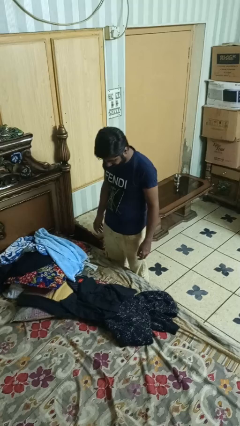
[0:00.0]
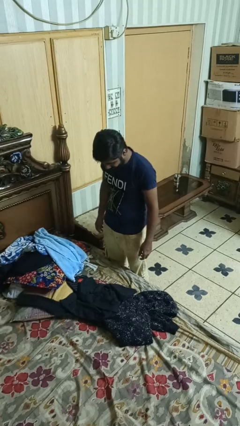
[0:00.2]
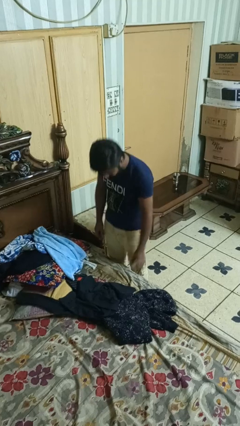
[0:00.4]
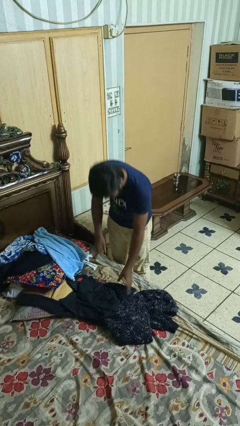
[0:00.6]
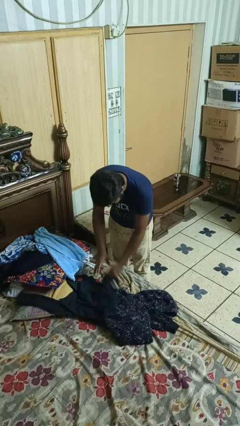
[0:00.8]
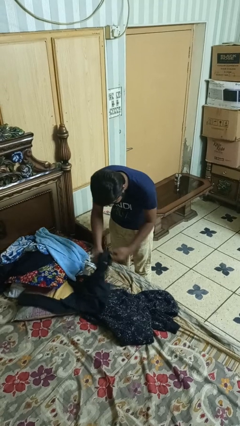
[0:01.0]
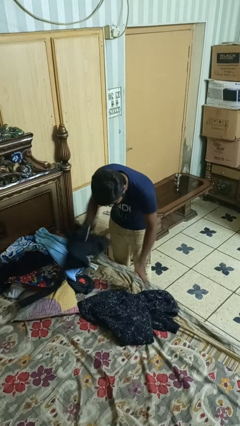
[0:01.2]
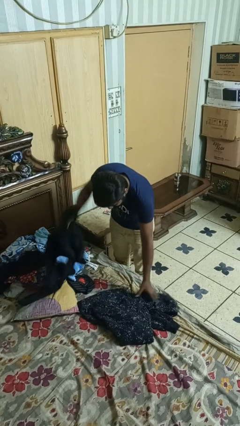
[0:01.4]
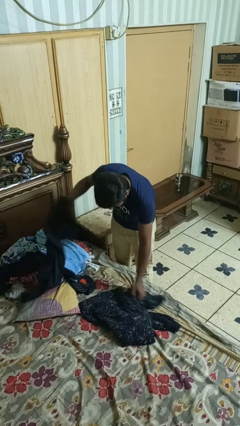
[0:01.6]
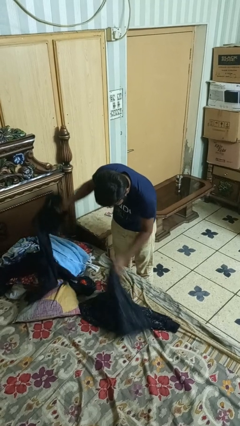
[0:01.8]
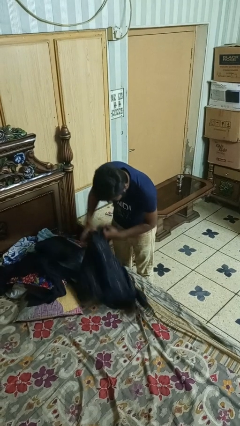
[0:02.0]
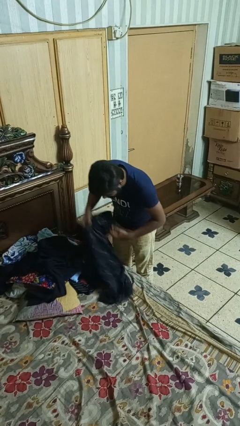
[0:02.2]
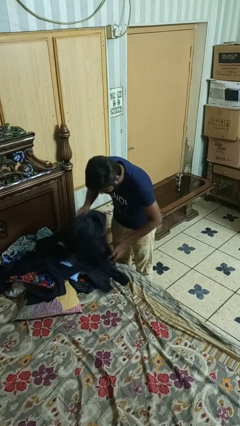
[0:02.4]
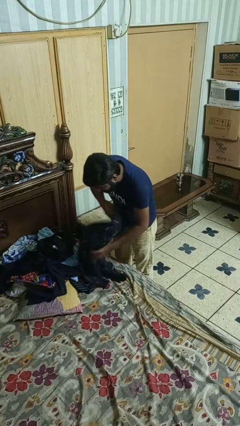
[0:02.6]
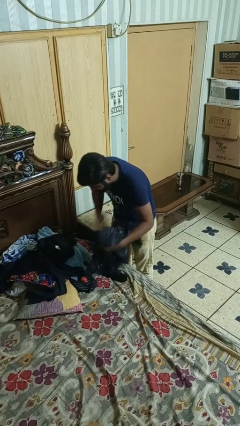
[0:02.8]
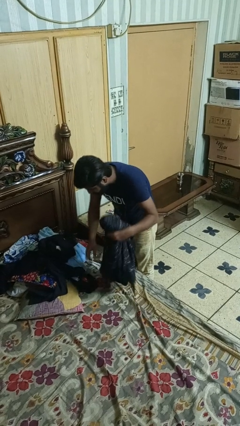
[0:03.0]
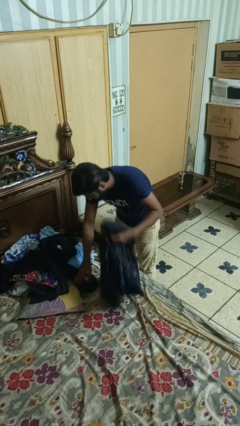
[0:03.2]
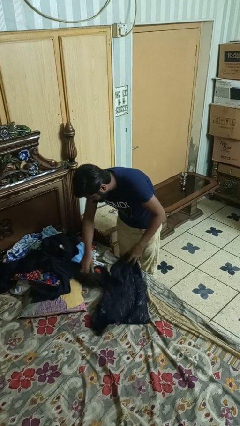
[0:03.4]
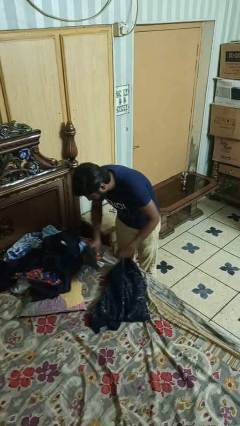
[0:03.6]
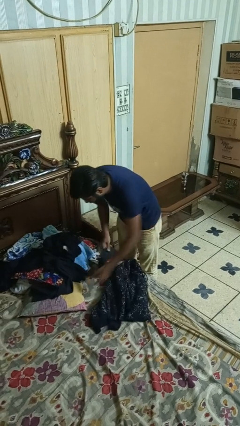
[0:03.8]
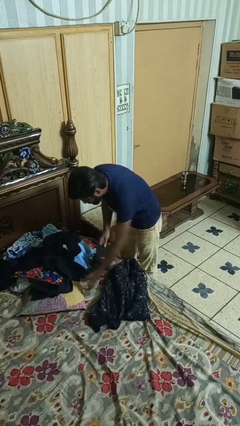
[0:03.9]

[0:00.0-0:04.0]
person searches under bed

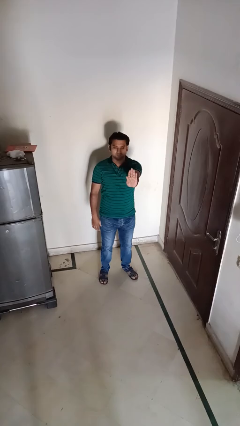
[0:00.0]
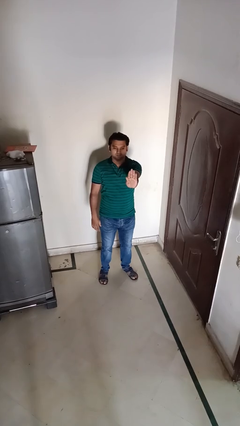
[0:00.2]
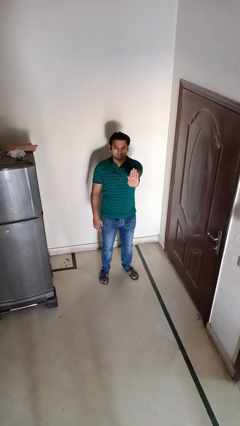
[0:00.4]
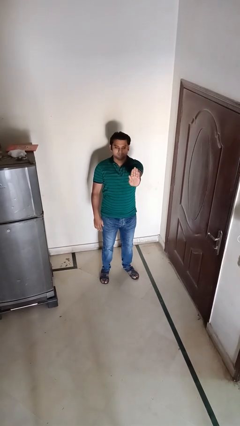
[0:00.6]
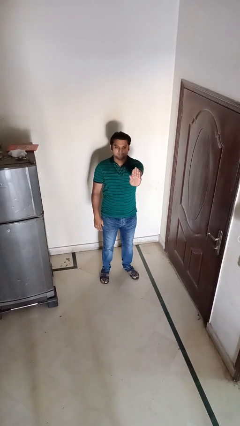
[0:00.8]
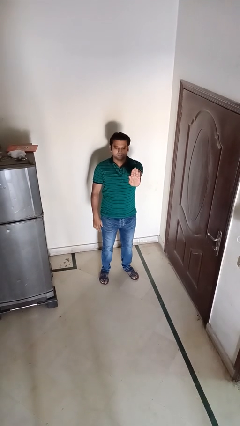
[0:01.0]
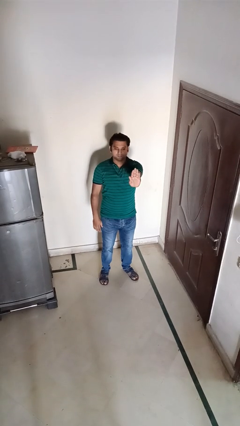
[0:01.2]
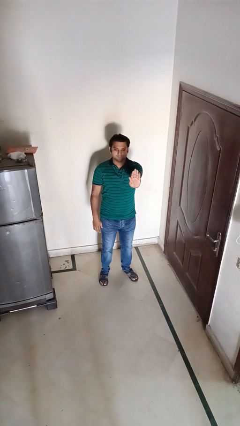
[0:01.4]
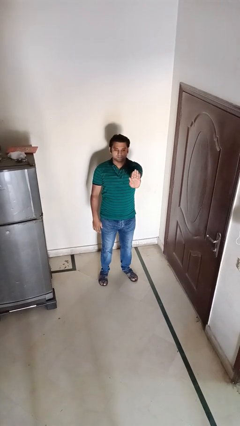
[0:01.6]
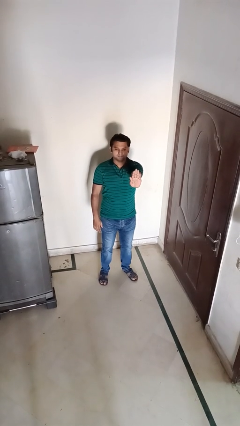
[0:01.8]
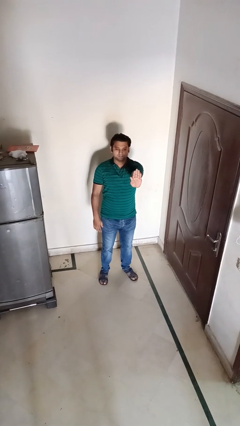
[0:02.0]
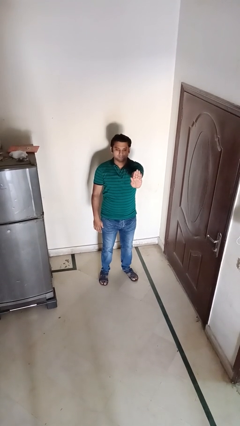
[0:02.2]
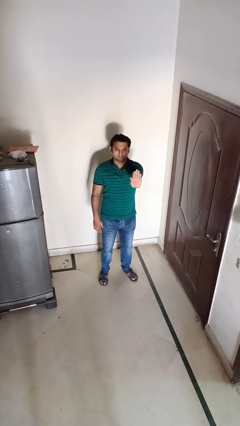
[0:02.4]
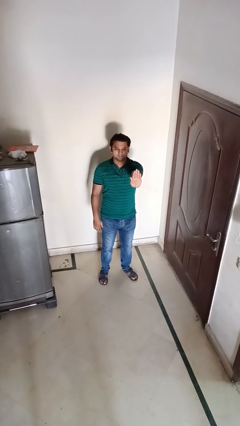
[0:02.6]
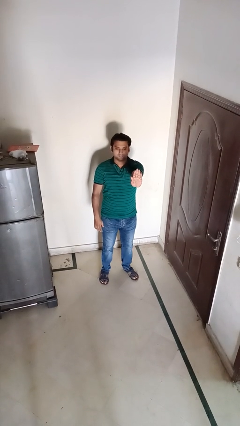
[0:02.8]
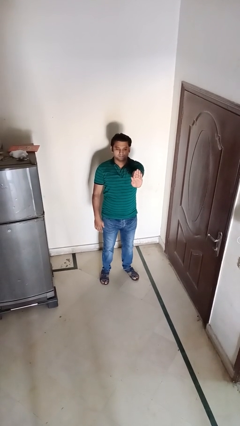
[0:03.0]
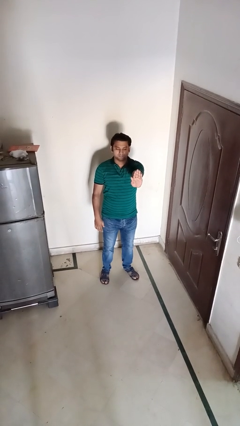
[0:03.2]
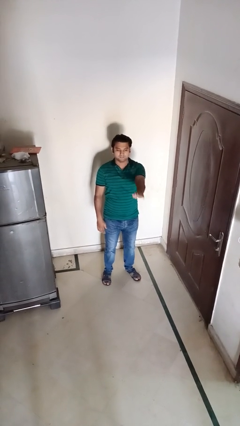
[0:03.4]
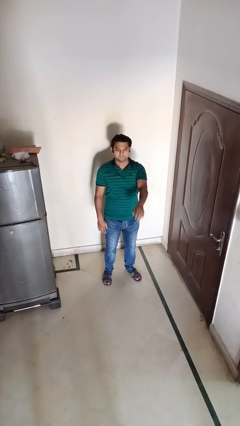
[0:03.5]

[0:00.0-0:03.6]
person gestures stop

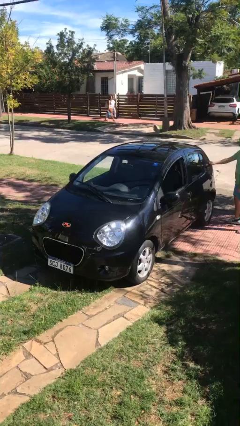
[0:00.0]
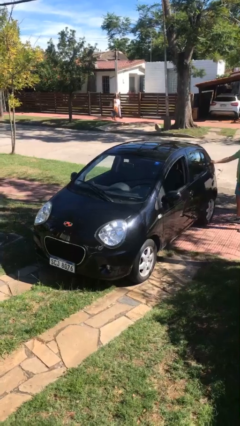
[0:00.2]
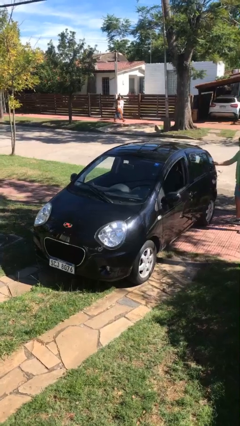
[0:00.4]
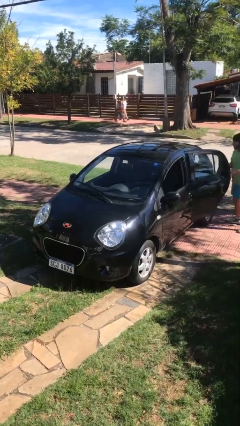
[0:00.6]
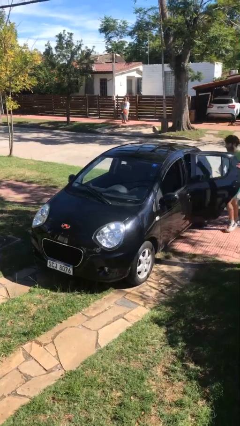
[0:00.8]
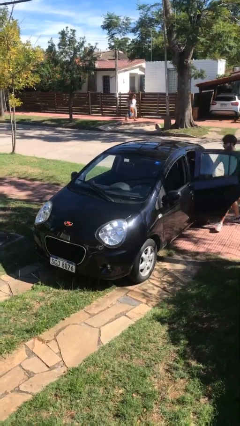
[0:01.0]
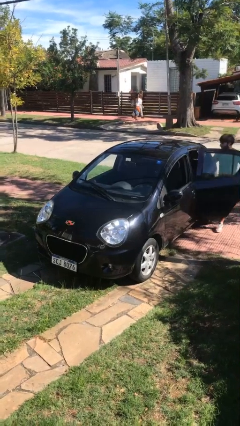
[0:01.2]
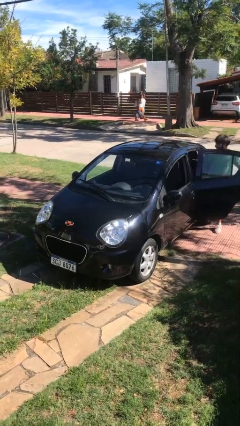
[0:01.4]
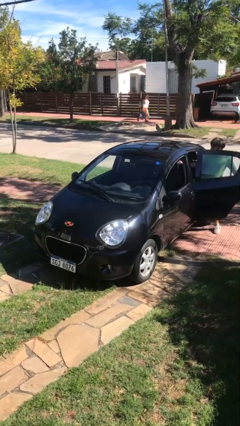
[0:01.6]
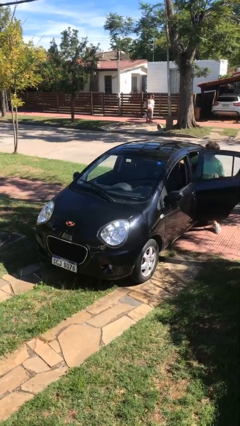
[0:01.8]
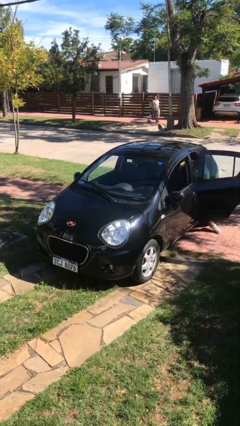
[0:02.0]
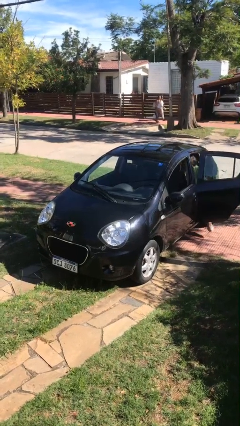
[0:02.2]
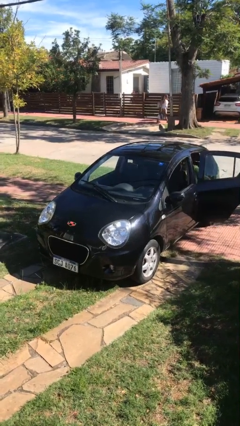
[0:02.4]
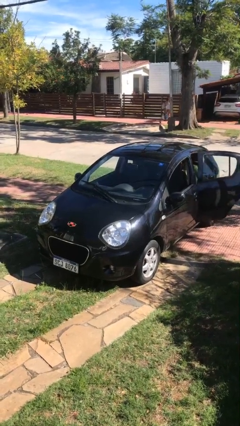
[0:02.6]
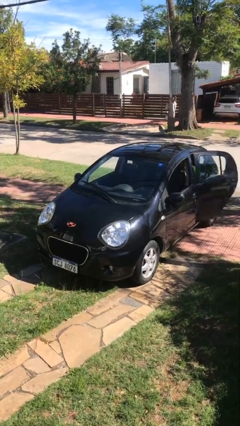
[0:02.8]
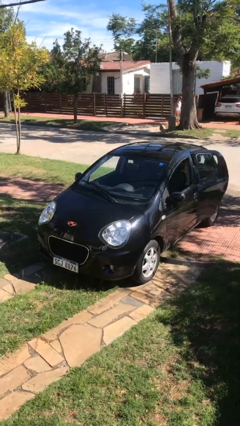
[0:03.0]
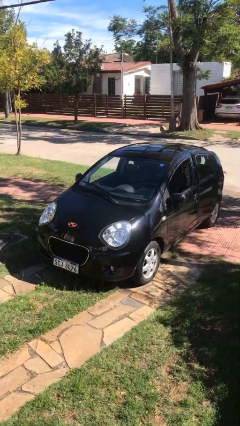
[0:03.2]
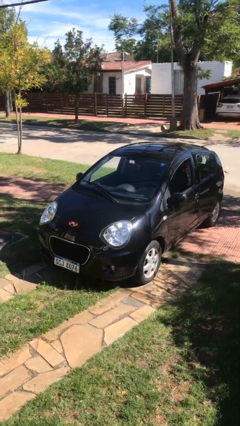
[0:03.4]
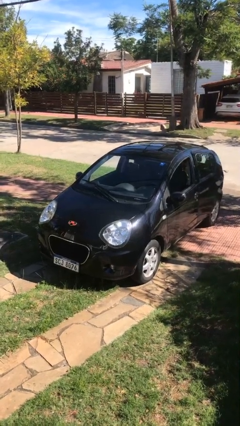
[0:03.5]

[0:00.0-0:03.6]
car picks up person

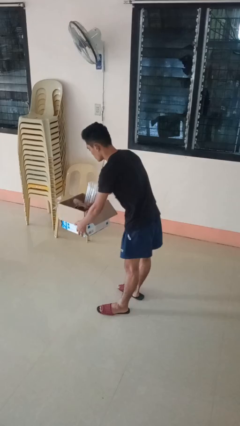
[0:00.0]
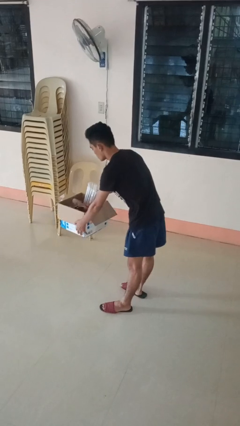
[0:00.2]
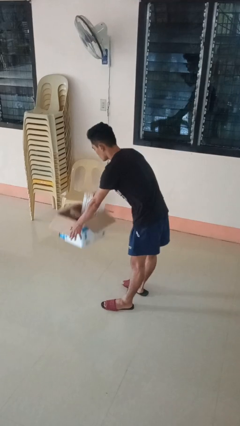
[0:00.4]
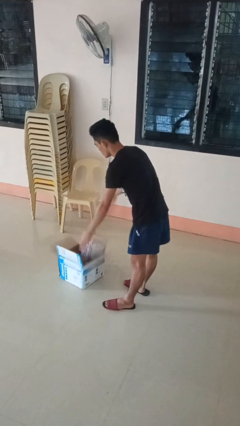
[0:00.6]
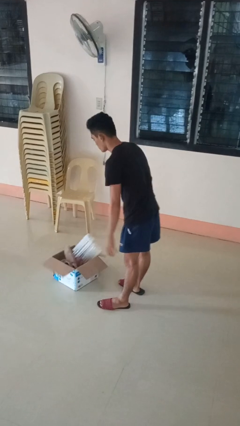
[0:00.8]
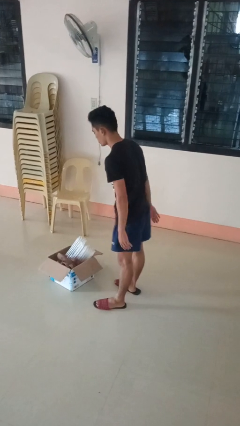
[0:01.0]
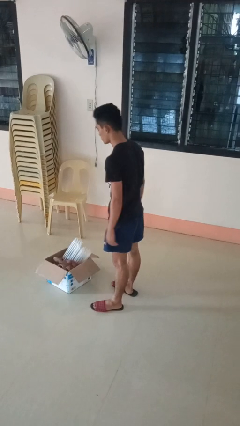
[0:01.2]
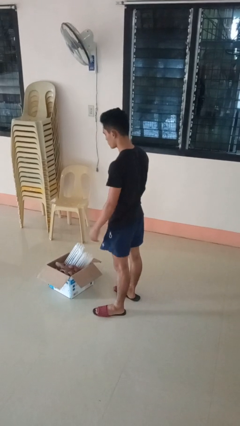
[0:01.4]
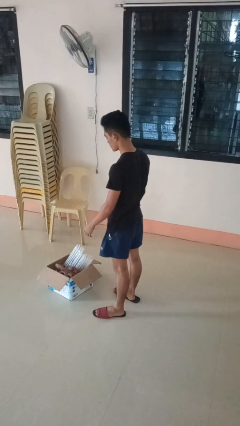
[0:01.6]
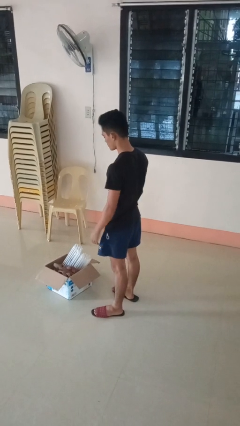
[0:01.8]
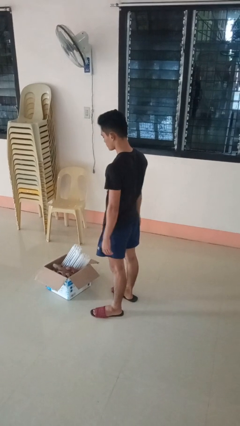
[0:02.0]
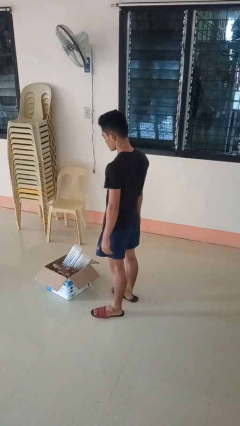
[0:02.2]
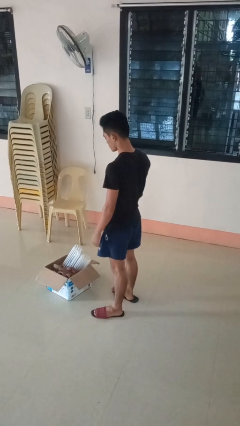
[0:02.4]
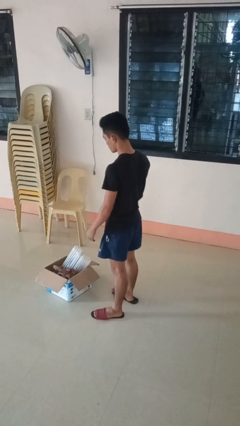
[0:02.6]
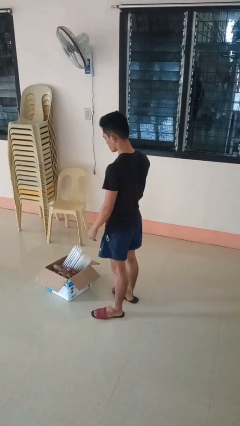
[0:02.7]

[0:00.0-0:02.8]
person unloads box onto floor

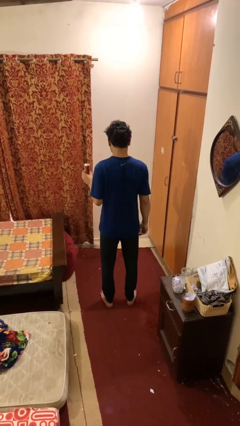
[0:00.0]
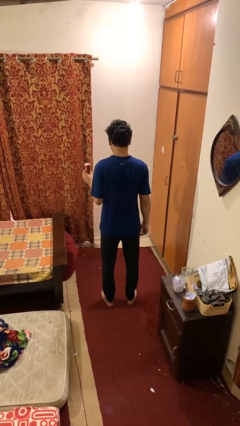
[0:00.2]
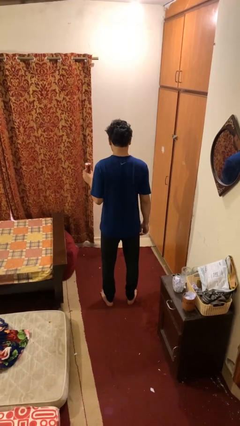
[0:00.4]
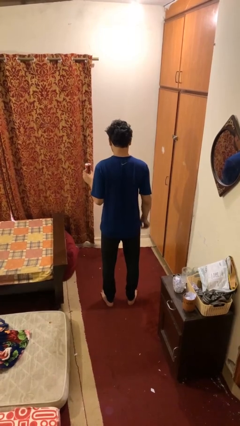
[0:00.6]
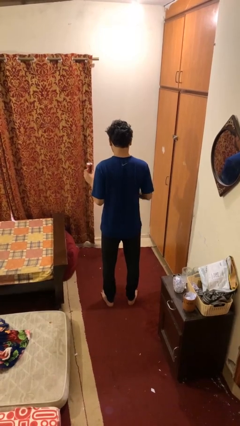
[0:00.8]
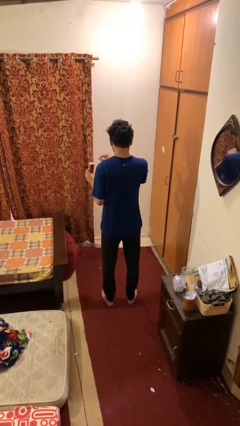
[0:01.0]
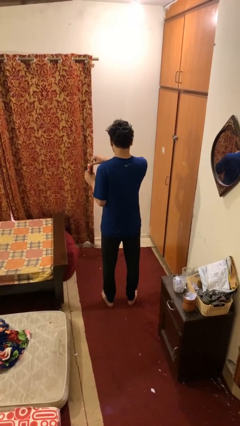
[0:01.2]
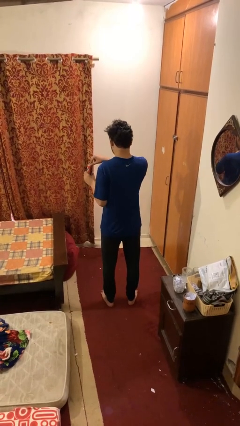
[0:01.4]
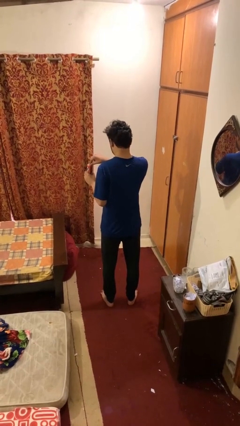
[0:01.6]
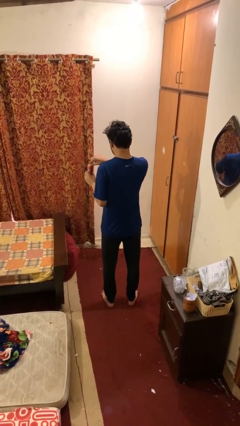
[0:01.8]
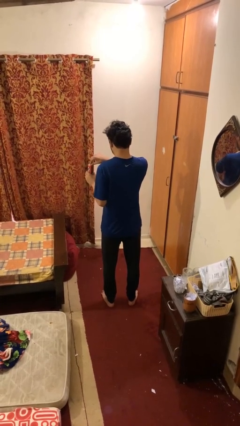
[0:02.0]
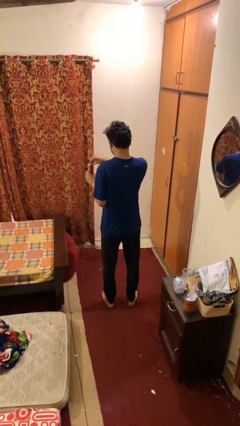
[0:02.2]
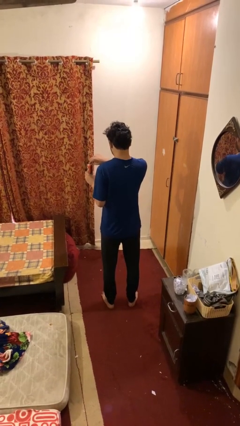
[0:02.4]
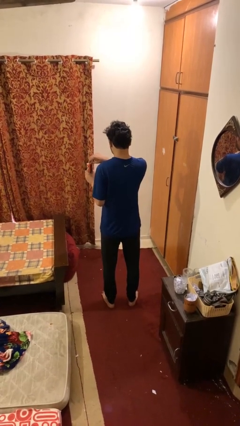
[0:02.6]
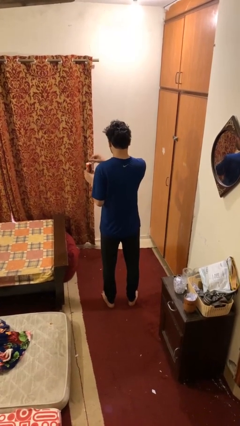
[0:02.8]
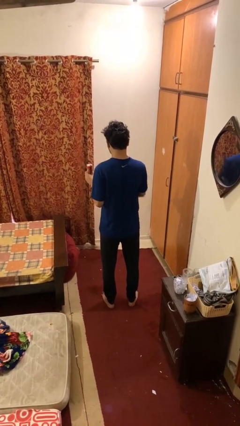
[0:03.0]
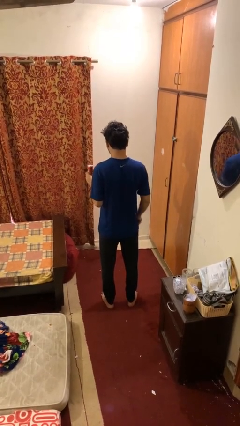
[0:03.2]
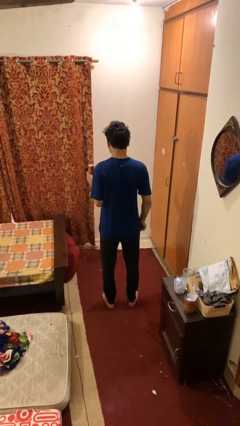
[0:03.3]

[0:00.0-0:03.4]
person opens beverage can

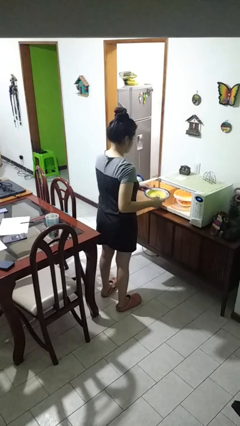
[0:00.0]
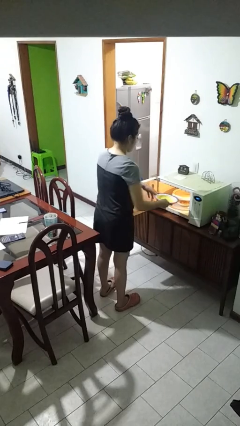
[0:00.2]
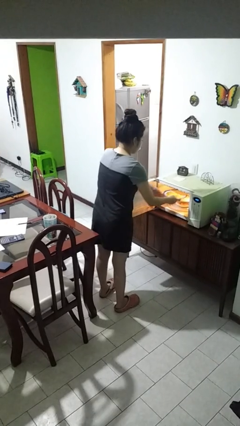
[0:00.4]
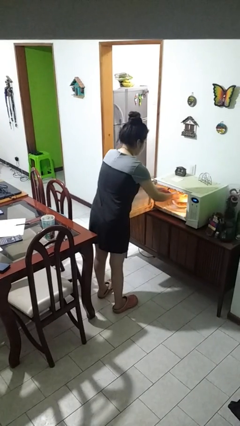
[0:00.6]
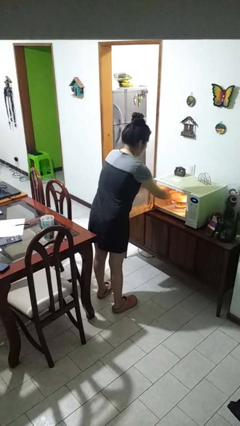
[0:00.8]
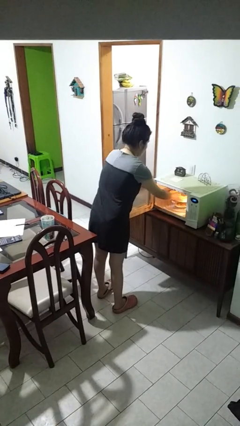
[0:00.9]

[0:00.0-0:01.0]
person puts object into microwave
